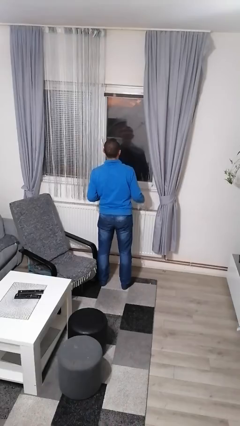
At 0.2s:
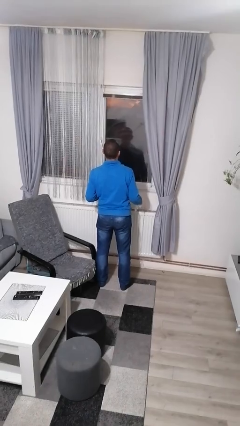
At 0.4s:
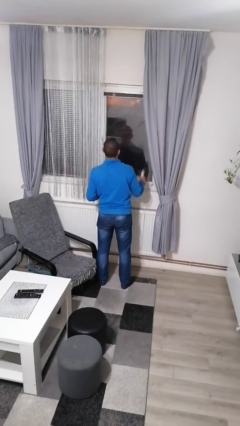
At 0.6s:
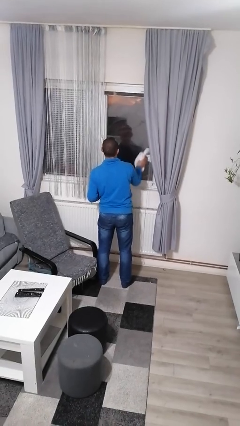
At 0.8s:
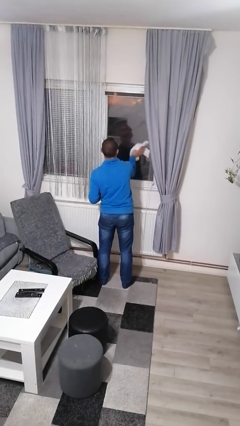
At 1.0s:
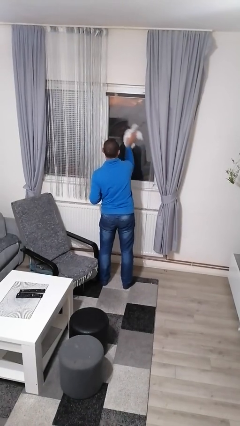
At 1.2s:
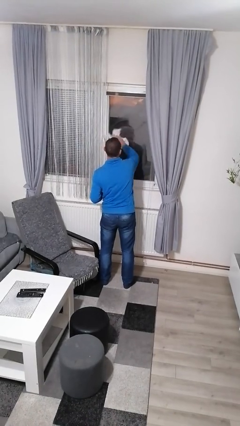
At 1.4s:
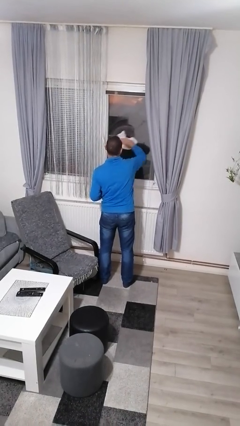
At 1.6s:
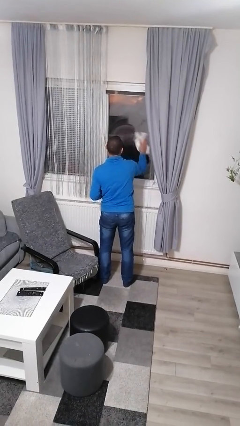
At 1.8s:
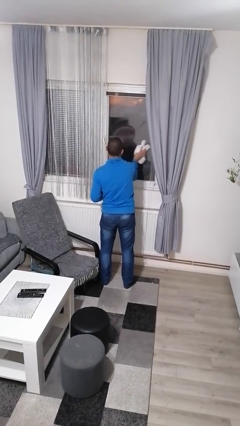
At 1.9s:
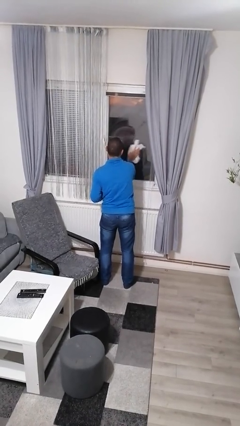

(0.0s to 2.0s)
person washes window

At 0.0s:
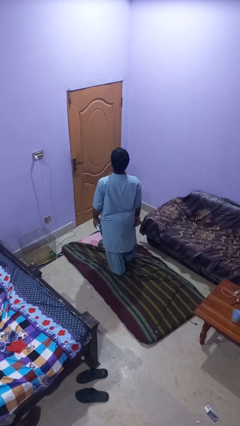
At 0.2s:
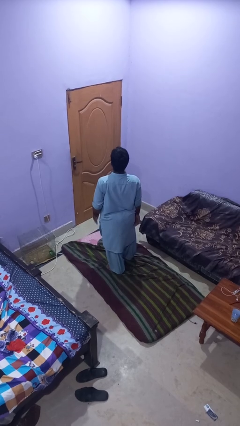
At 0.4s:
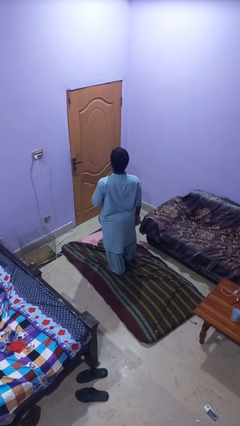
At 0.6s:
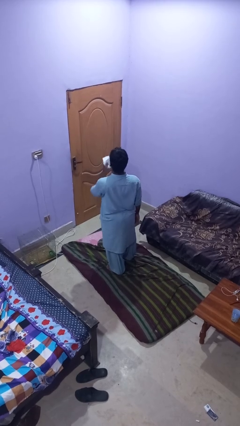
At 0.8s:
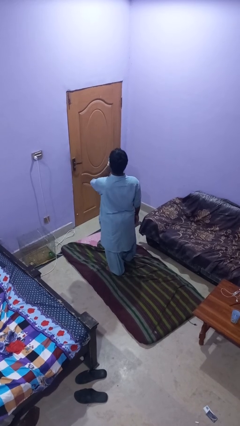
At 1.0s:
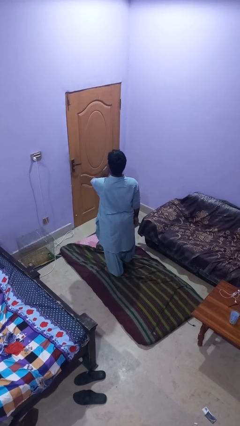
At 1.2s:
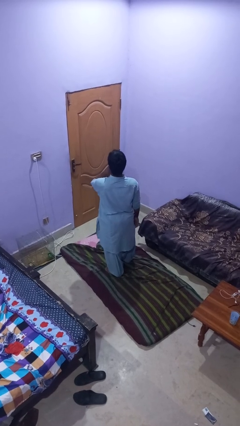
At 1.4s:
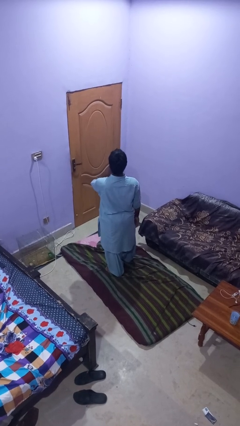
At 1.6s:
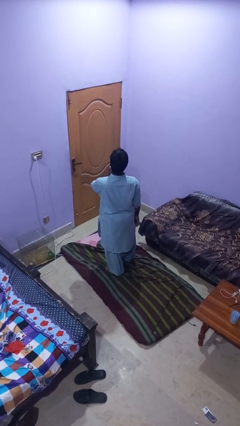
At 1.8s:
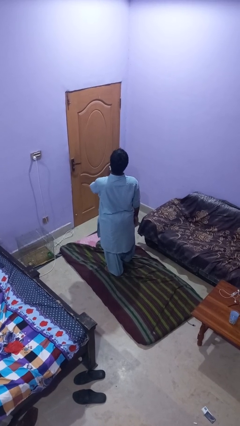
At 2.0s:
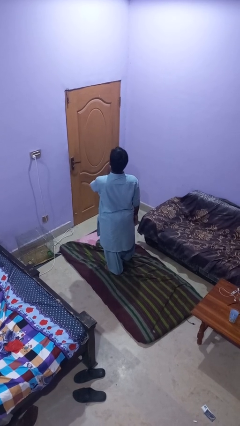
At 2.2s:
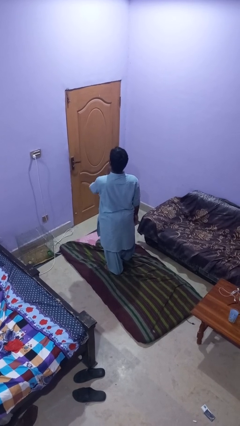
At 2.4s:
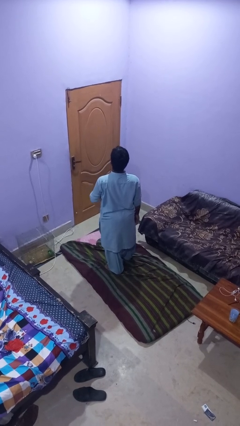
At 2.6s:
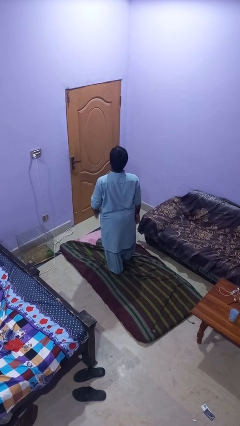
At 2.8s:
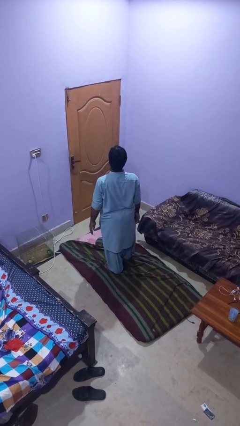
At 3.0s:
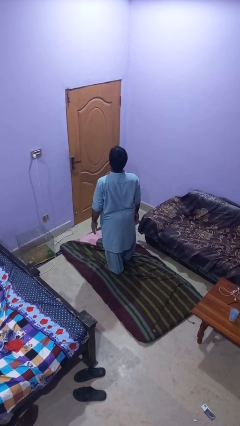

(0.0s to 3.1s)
person wipes mouth with napkin

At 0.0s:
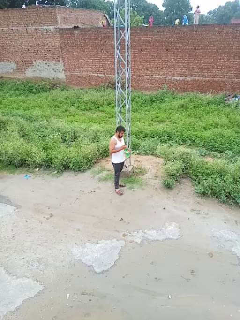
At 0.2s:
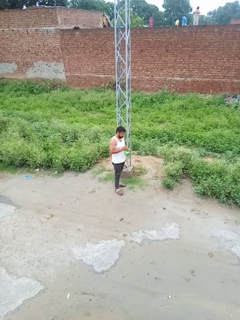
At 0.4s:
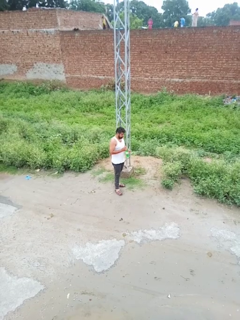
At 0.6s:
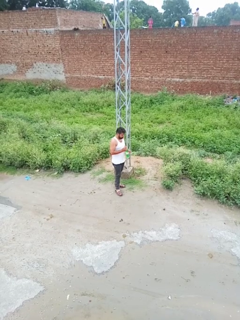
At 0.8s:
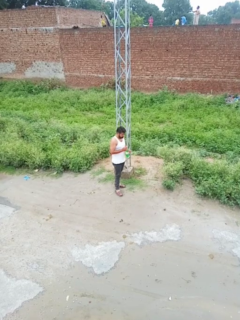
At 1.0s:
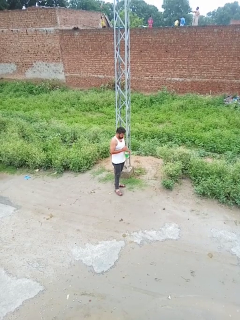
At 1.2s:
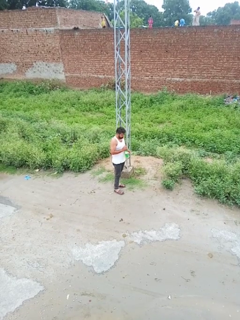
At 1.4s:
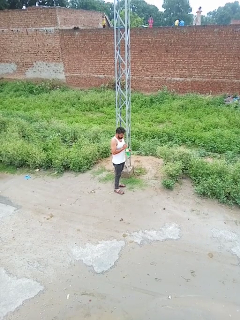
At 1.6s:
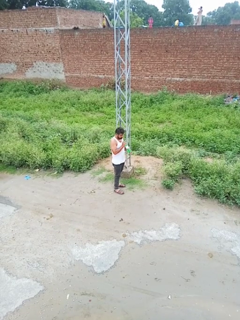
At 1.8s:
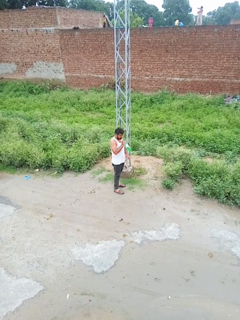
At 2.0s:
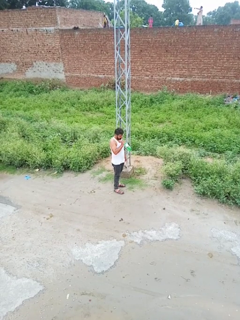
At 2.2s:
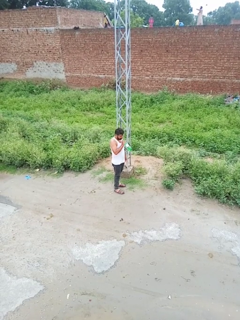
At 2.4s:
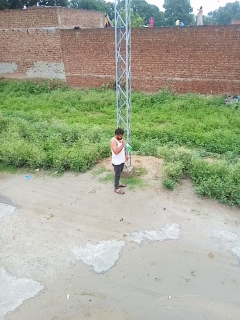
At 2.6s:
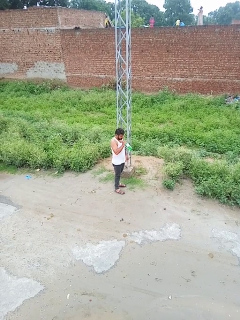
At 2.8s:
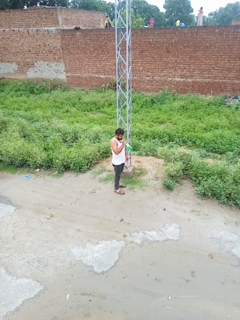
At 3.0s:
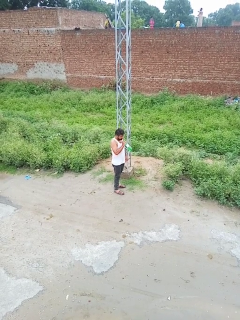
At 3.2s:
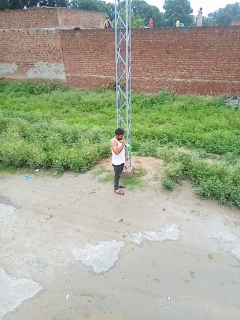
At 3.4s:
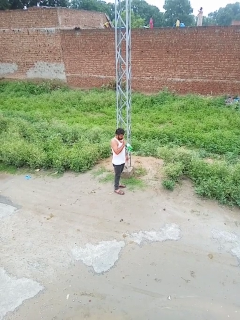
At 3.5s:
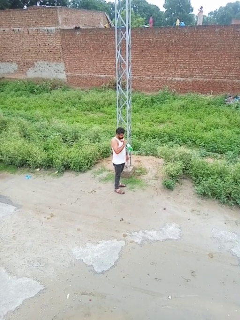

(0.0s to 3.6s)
person drinks from straw

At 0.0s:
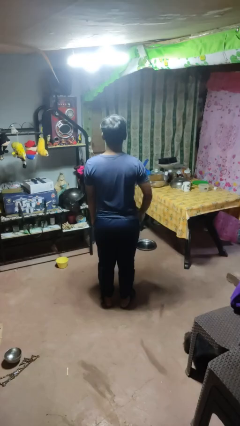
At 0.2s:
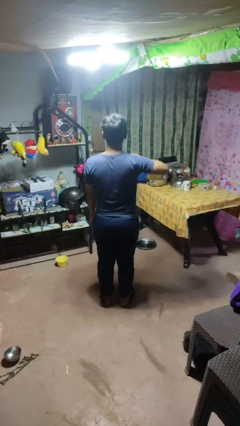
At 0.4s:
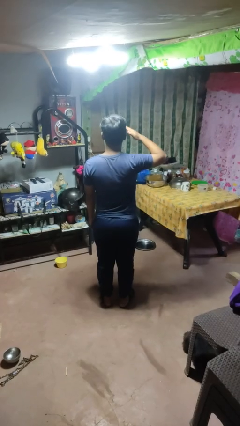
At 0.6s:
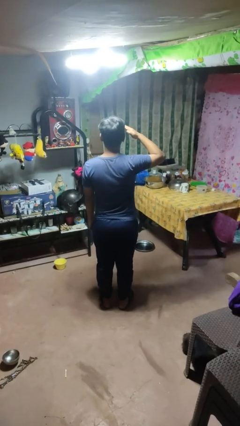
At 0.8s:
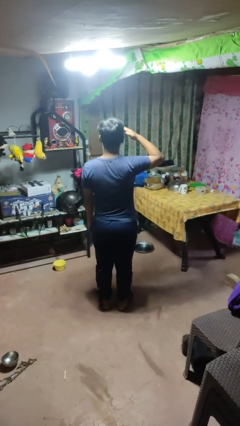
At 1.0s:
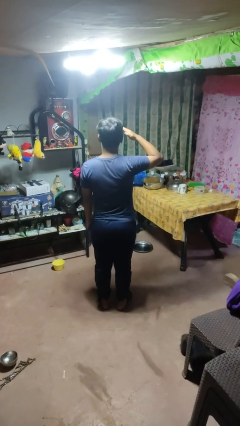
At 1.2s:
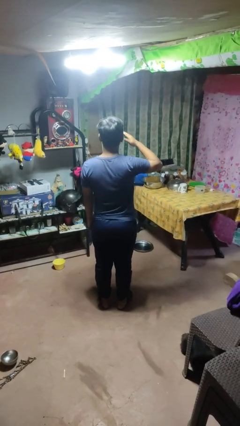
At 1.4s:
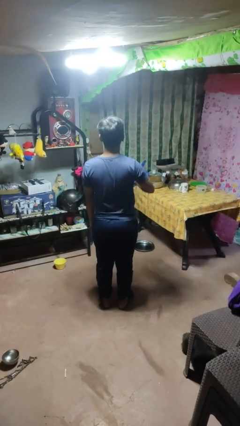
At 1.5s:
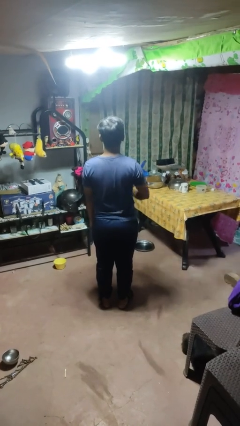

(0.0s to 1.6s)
person salutes

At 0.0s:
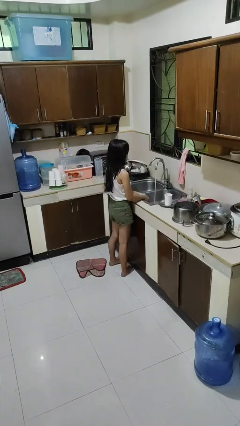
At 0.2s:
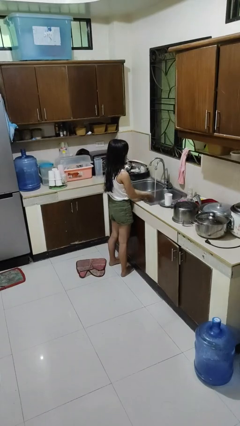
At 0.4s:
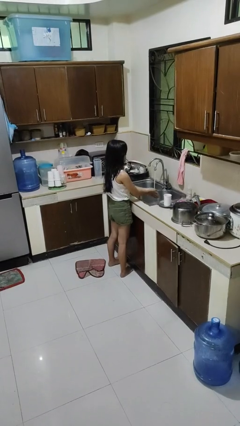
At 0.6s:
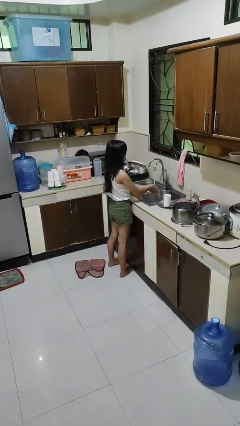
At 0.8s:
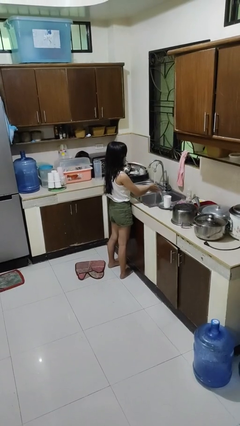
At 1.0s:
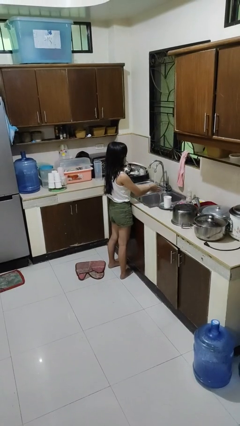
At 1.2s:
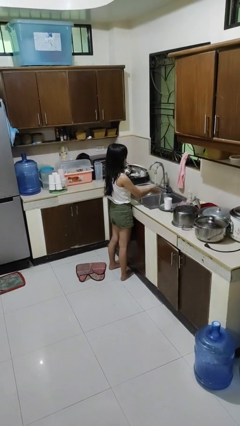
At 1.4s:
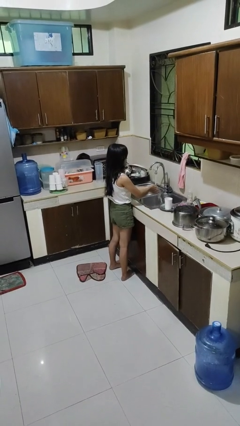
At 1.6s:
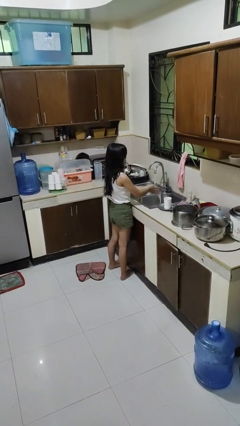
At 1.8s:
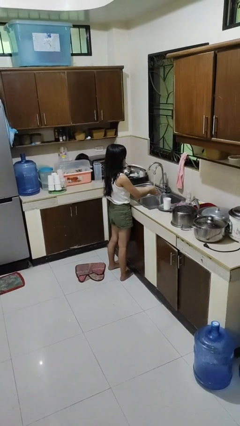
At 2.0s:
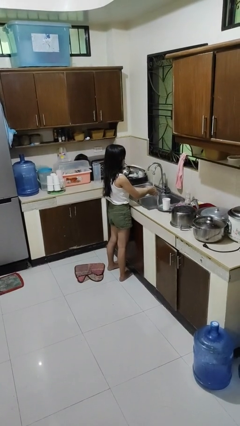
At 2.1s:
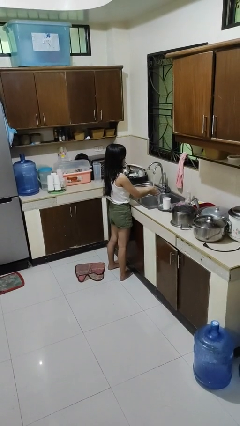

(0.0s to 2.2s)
person washes hands

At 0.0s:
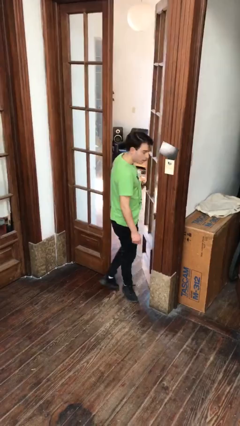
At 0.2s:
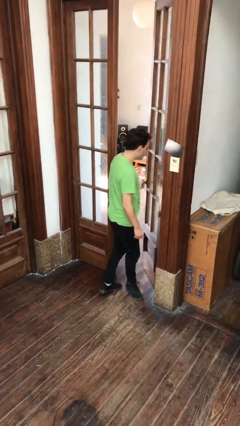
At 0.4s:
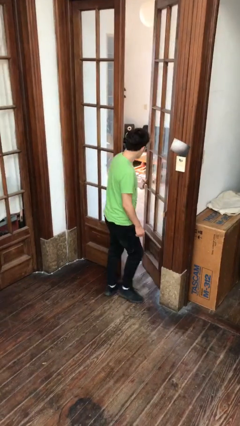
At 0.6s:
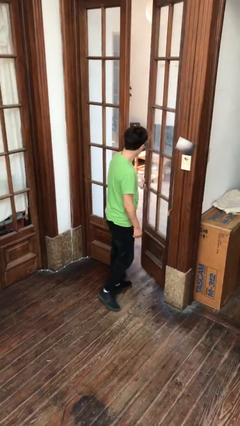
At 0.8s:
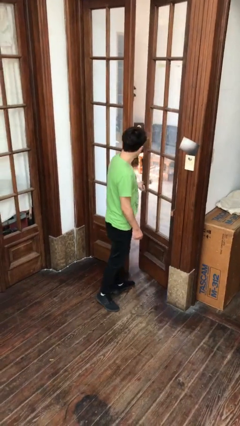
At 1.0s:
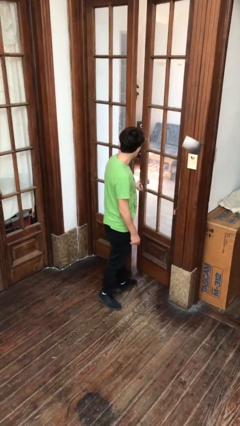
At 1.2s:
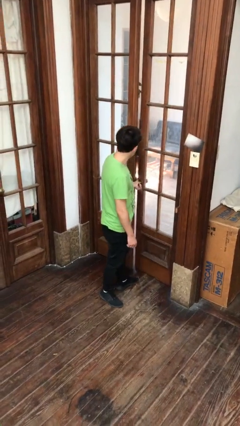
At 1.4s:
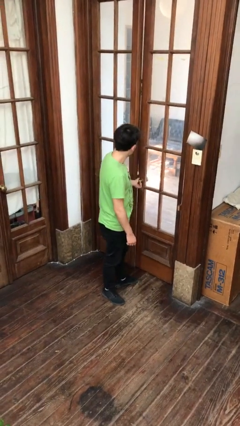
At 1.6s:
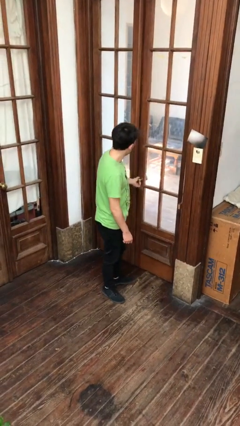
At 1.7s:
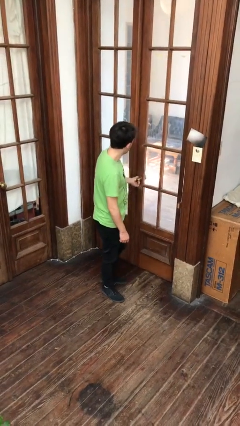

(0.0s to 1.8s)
person closes facility door

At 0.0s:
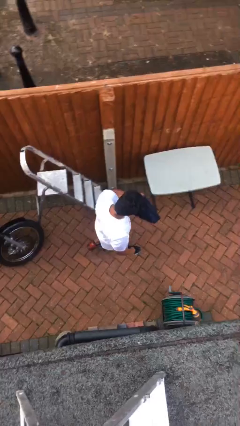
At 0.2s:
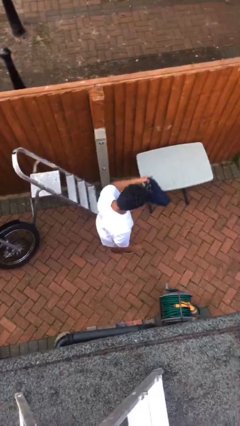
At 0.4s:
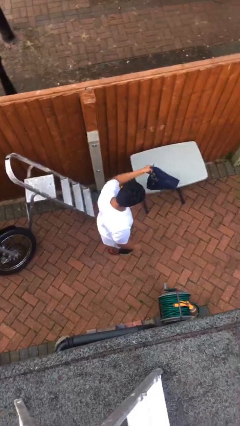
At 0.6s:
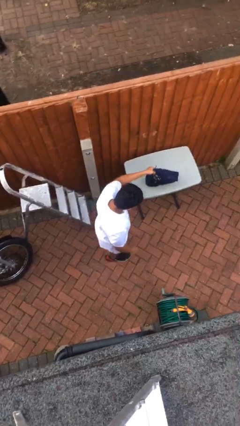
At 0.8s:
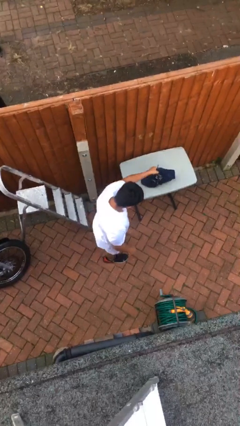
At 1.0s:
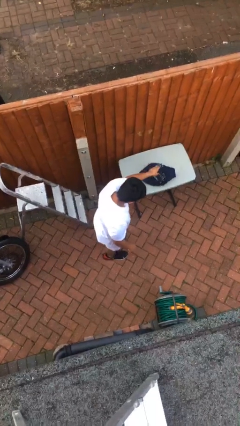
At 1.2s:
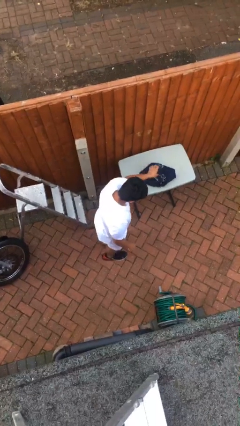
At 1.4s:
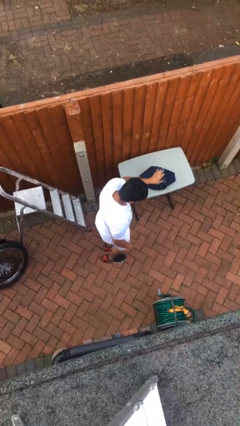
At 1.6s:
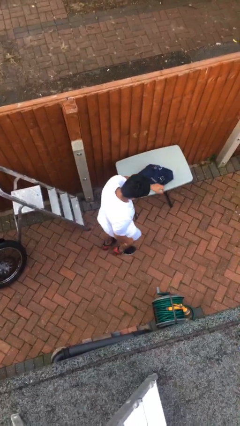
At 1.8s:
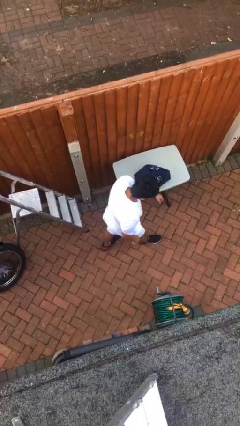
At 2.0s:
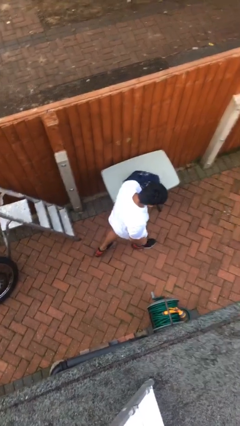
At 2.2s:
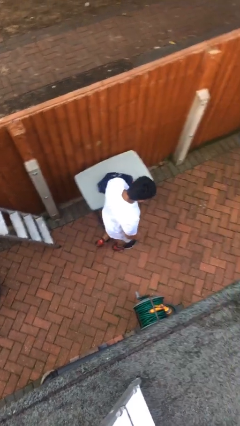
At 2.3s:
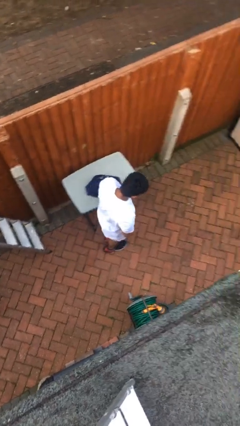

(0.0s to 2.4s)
person puts down object on table

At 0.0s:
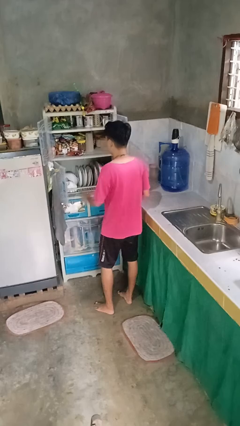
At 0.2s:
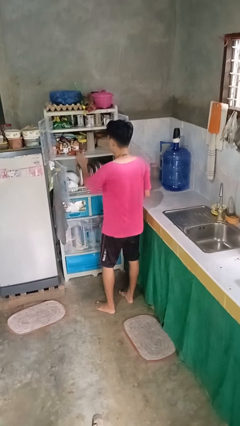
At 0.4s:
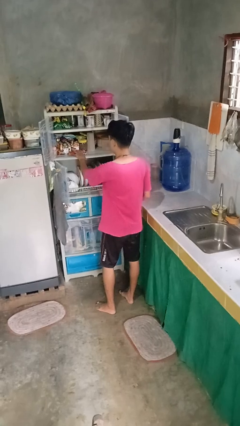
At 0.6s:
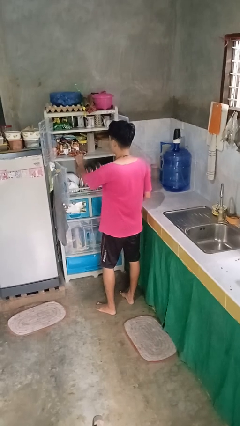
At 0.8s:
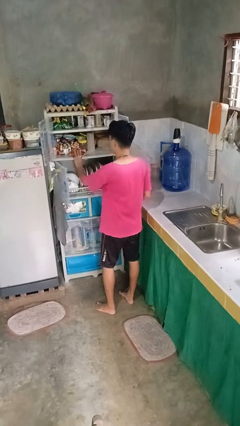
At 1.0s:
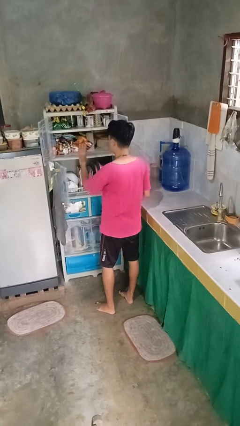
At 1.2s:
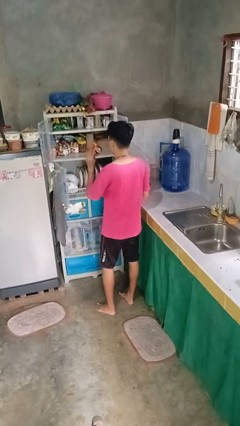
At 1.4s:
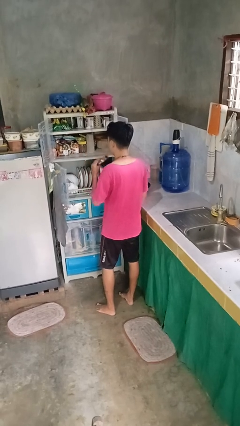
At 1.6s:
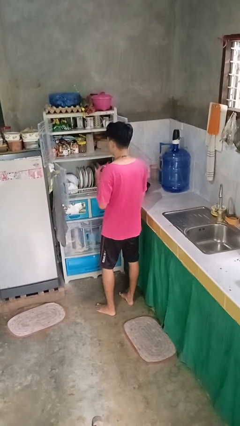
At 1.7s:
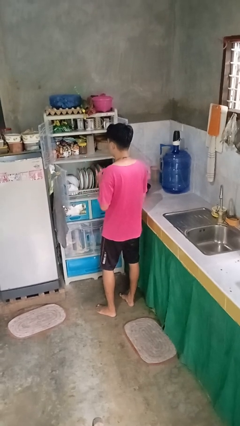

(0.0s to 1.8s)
person takes object from cabinet
